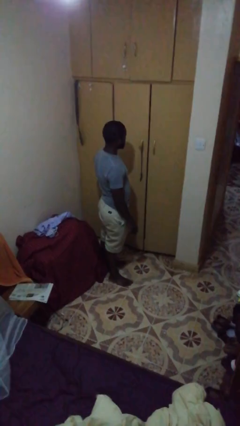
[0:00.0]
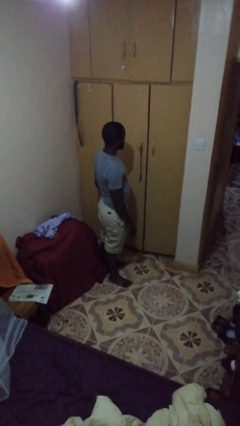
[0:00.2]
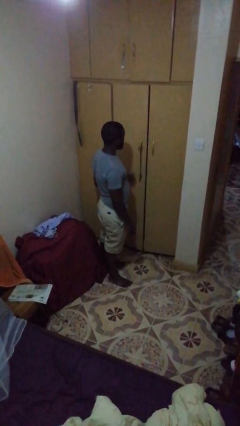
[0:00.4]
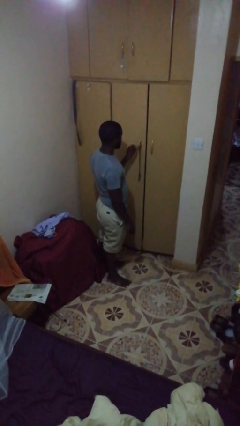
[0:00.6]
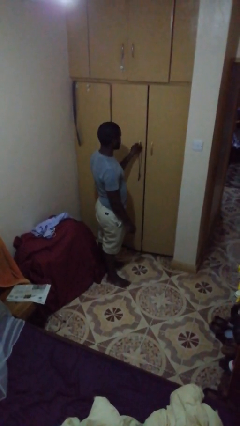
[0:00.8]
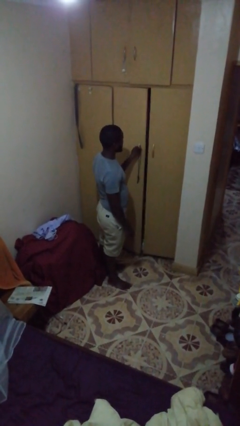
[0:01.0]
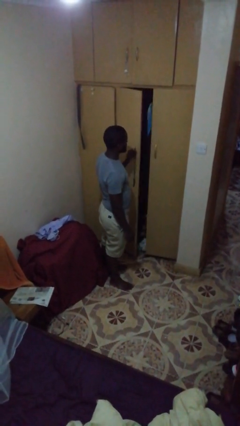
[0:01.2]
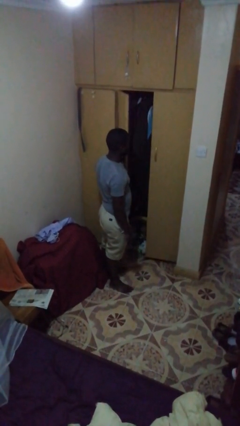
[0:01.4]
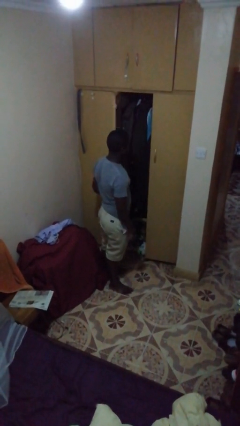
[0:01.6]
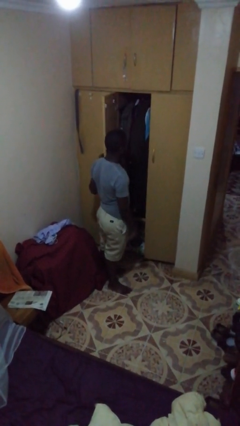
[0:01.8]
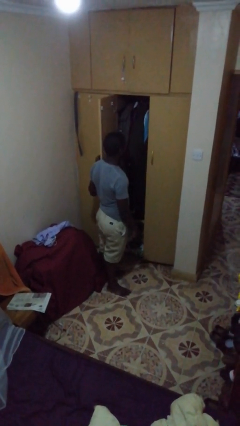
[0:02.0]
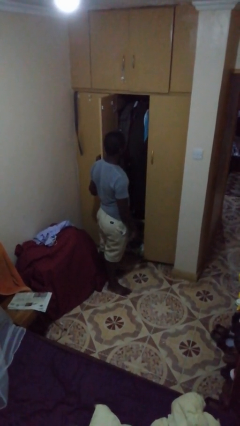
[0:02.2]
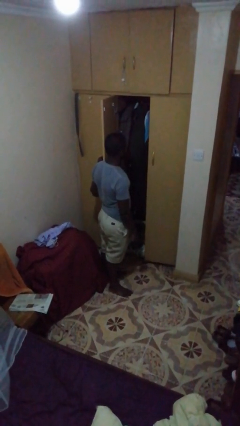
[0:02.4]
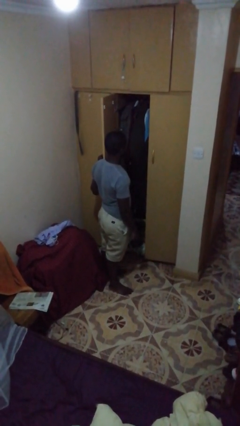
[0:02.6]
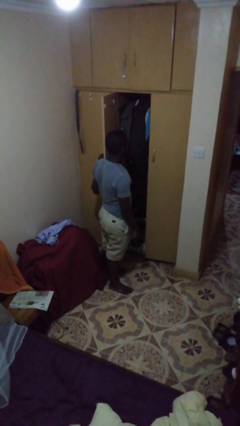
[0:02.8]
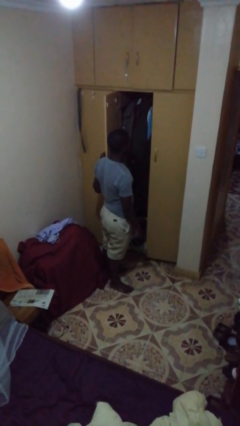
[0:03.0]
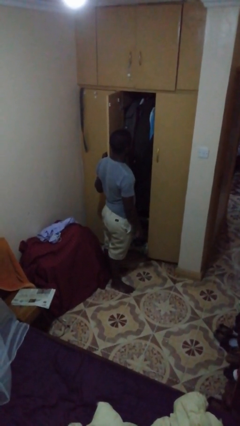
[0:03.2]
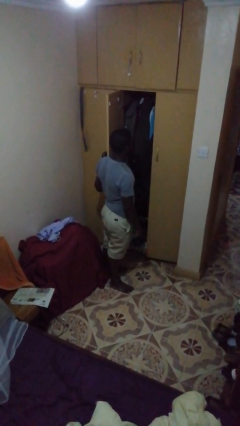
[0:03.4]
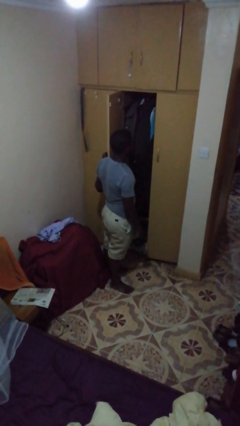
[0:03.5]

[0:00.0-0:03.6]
person opens closet door

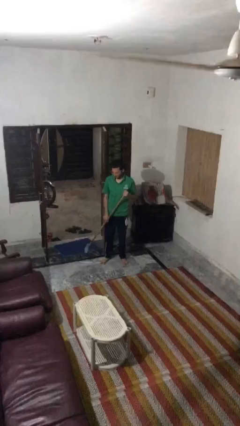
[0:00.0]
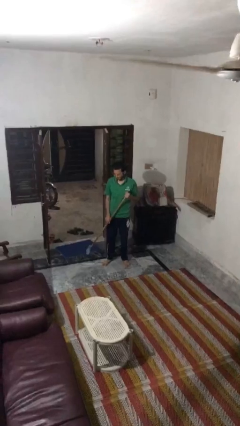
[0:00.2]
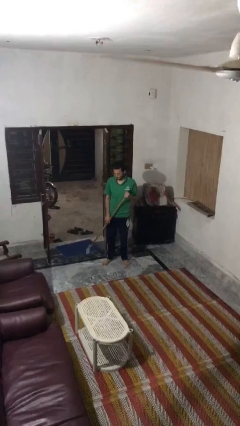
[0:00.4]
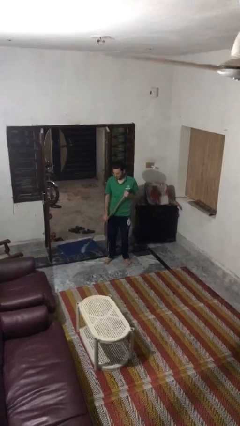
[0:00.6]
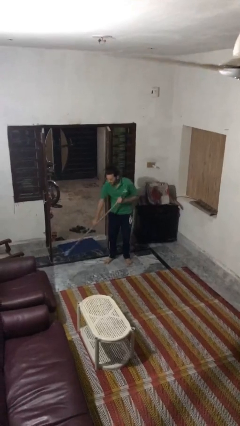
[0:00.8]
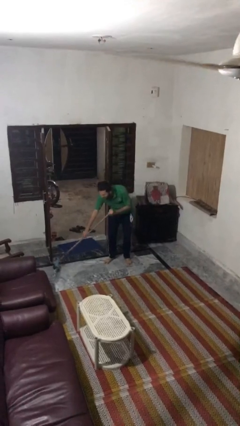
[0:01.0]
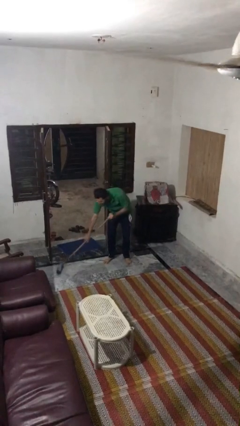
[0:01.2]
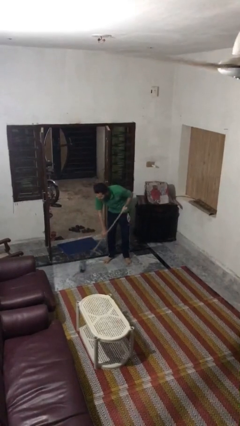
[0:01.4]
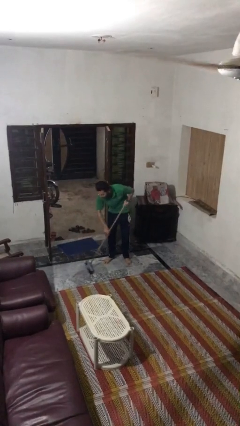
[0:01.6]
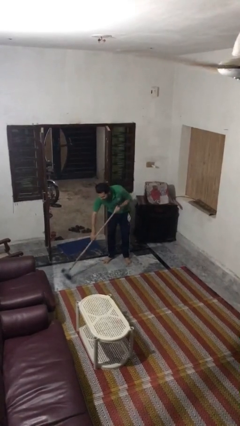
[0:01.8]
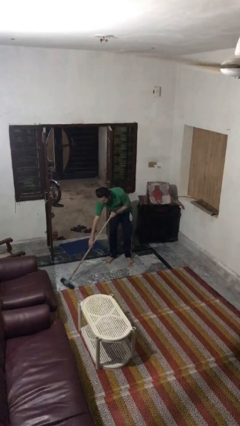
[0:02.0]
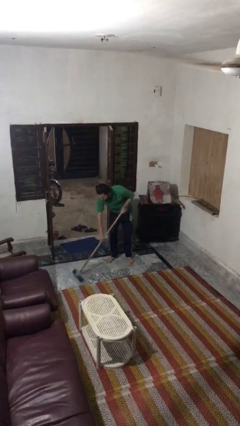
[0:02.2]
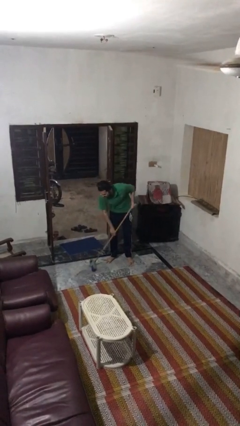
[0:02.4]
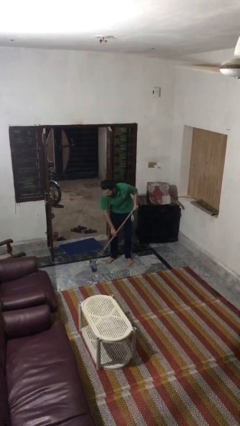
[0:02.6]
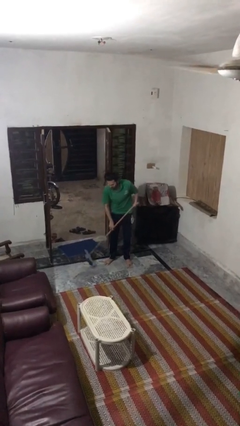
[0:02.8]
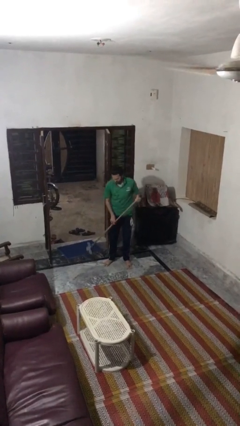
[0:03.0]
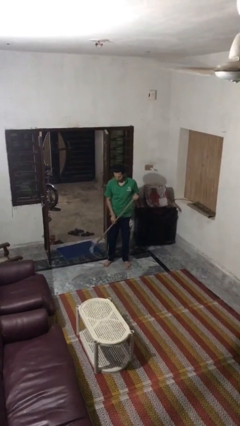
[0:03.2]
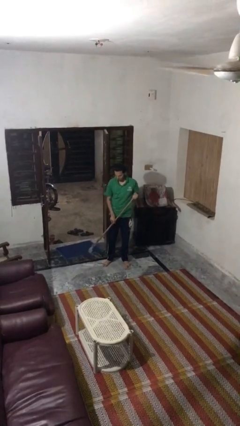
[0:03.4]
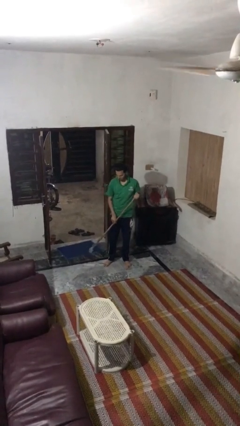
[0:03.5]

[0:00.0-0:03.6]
person sweeps floor

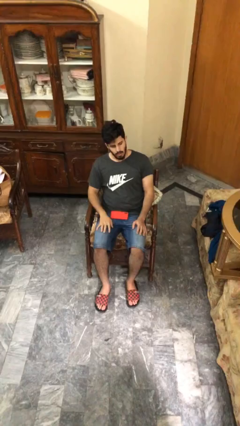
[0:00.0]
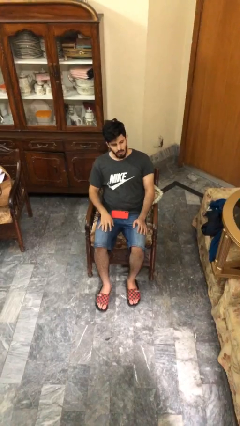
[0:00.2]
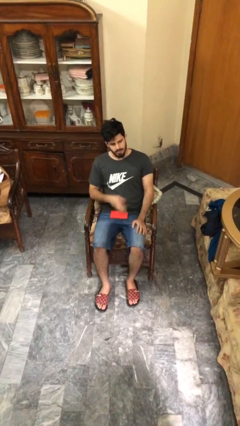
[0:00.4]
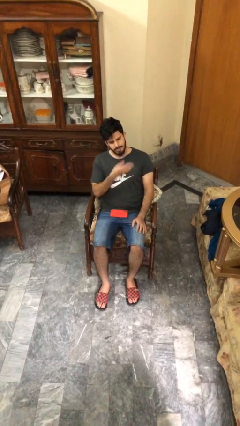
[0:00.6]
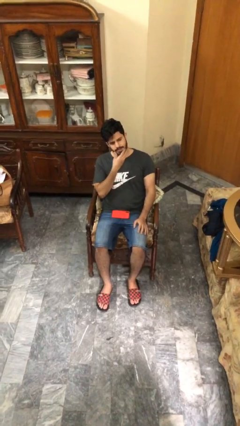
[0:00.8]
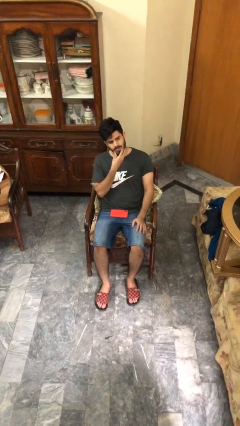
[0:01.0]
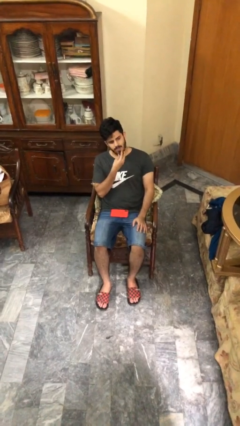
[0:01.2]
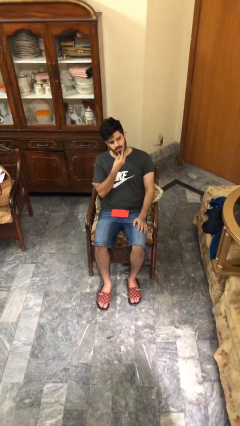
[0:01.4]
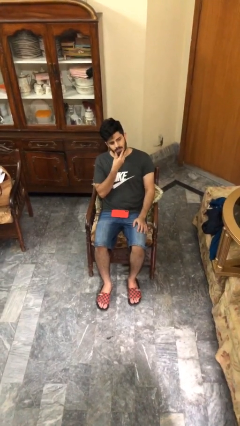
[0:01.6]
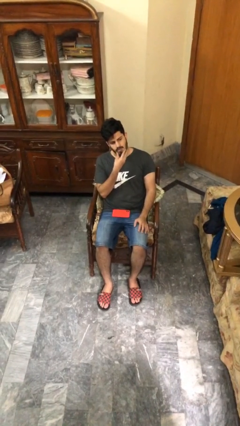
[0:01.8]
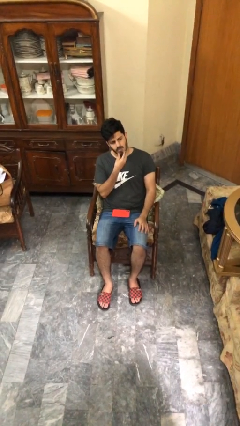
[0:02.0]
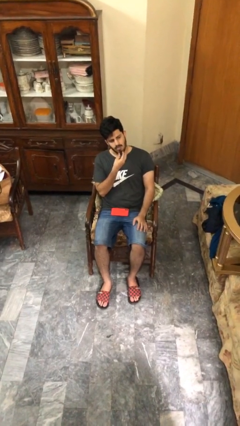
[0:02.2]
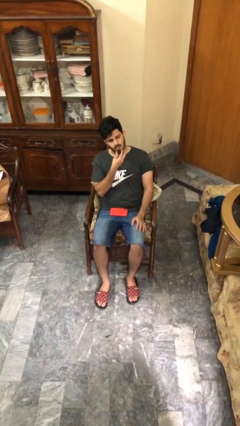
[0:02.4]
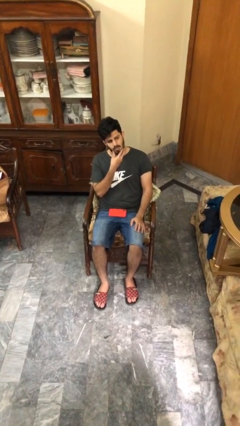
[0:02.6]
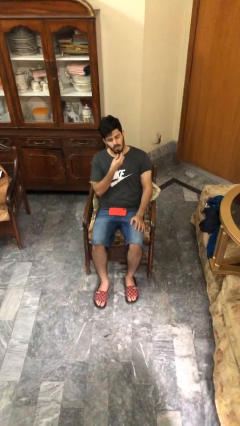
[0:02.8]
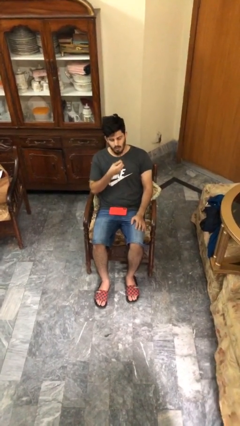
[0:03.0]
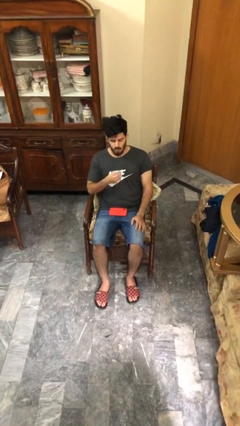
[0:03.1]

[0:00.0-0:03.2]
person strokes chin

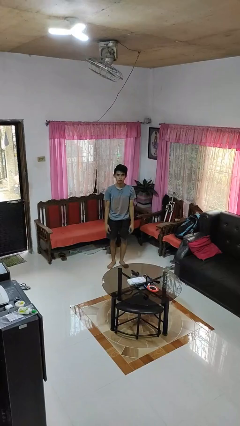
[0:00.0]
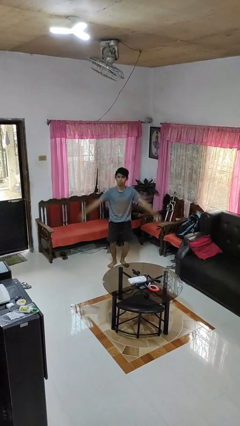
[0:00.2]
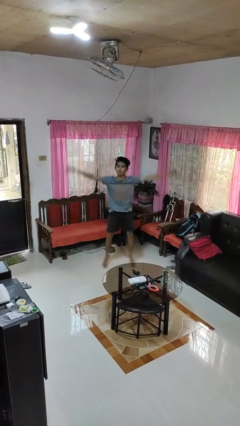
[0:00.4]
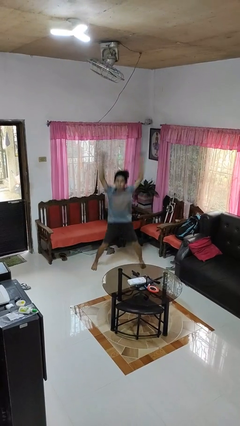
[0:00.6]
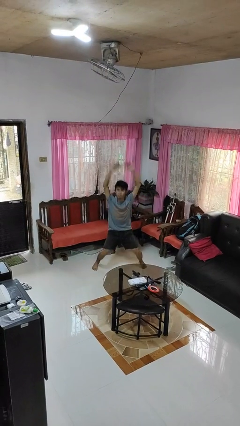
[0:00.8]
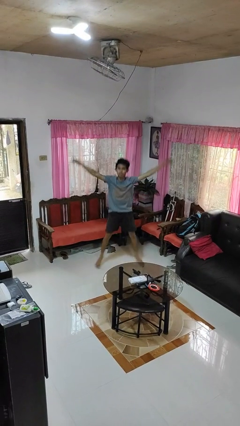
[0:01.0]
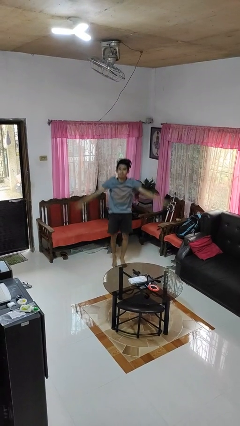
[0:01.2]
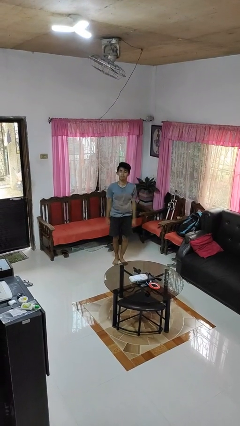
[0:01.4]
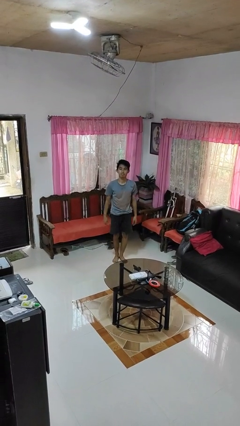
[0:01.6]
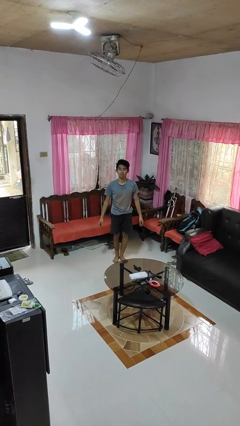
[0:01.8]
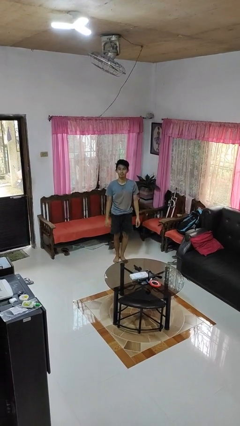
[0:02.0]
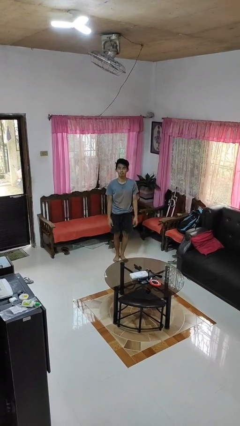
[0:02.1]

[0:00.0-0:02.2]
person exercises with jumping jacks

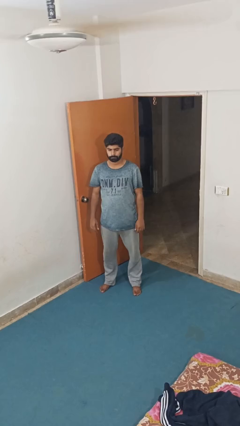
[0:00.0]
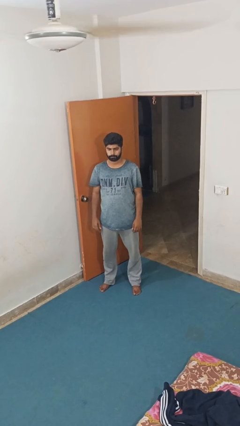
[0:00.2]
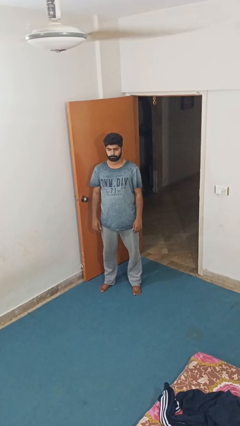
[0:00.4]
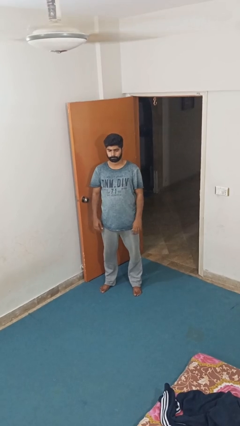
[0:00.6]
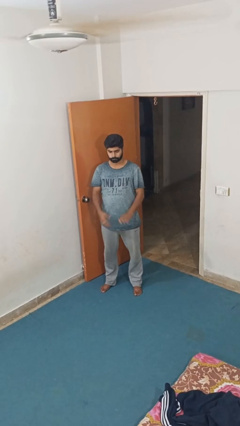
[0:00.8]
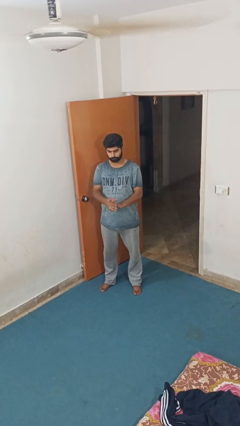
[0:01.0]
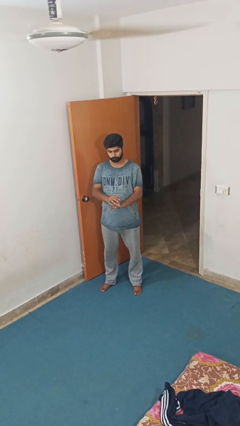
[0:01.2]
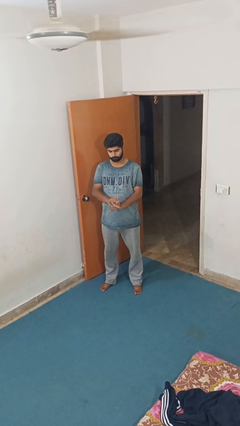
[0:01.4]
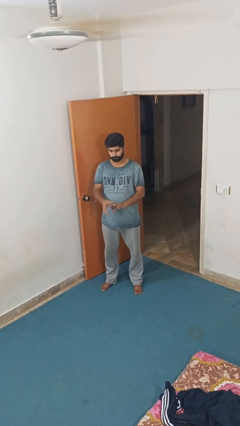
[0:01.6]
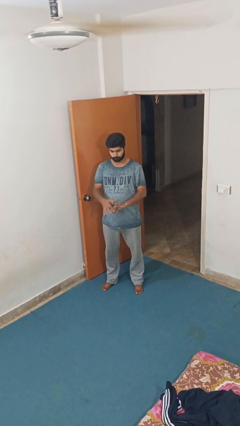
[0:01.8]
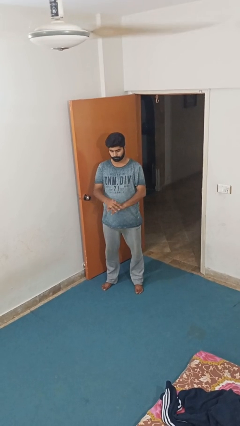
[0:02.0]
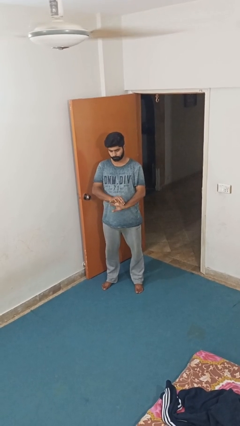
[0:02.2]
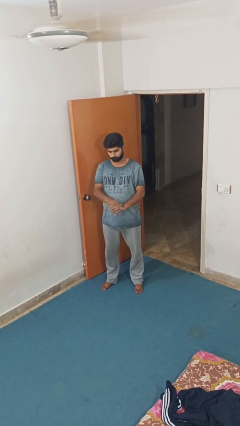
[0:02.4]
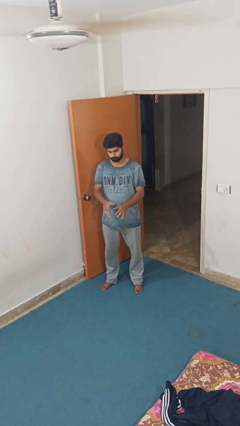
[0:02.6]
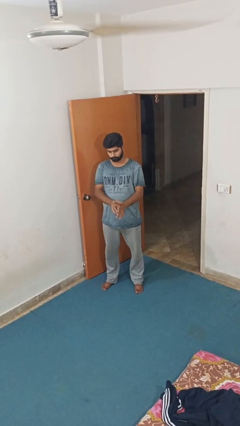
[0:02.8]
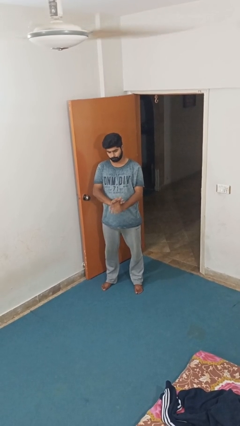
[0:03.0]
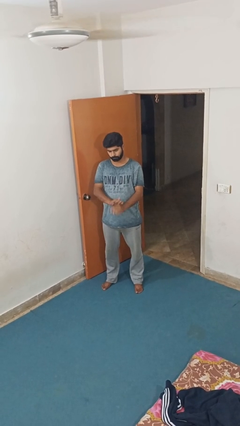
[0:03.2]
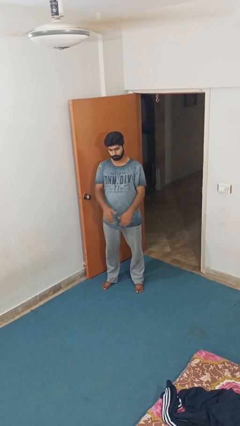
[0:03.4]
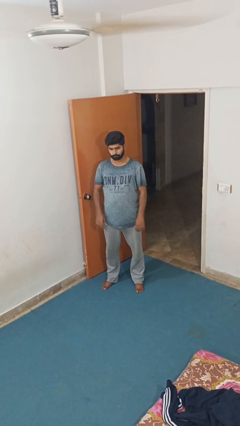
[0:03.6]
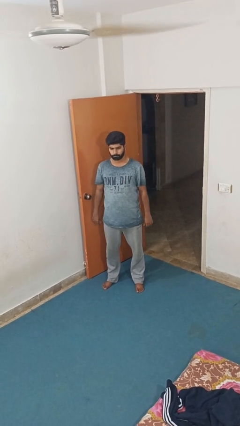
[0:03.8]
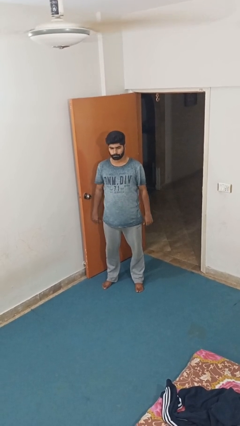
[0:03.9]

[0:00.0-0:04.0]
person snaps fingers

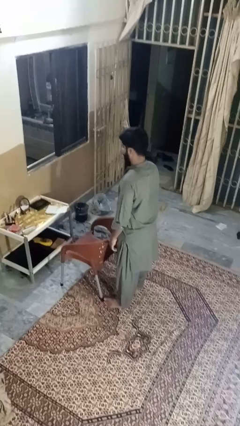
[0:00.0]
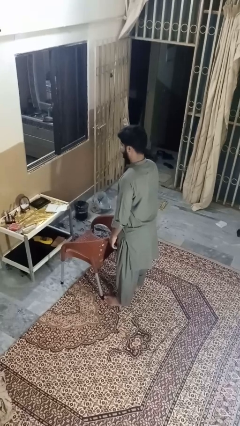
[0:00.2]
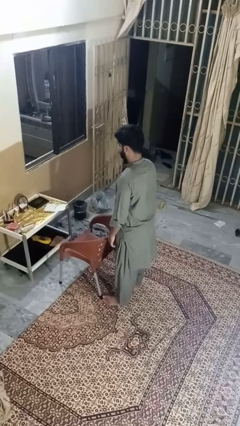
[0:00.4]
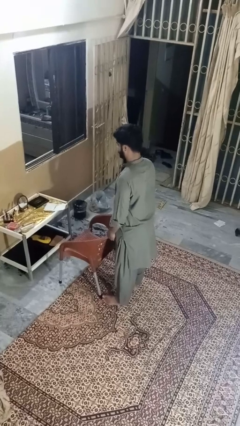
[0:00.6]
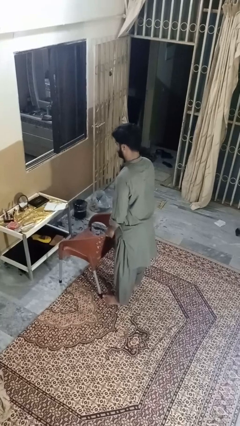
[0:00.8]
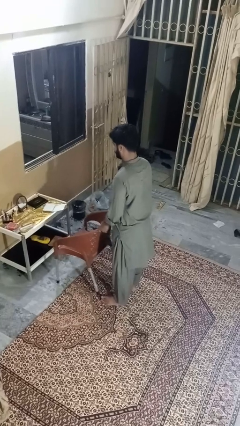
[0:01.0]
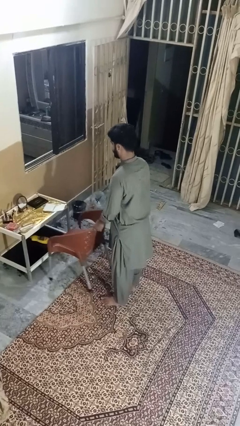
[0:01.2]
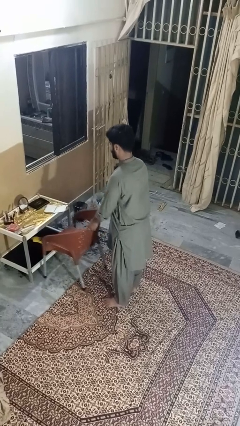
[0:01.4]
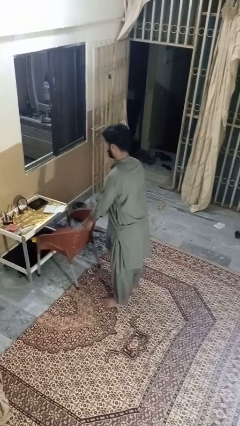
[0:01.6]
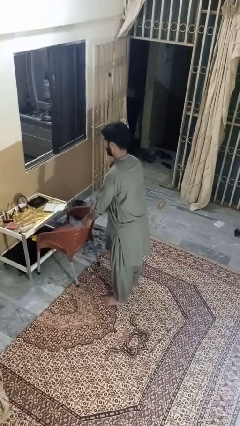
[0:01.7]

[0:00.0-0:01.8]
person pushes in chair
